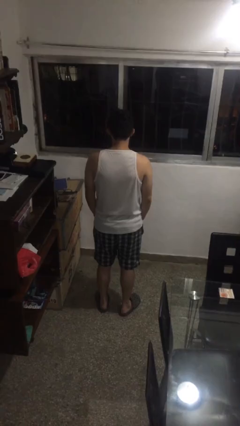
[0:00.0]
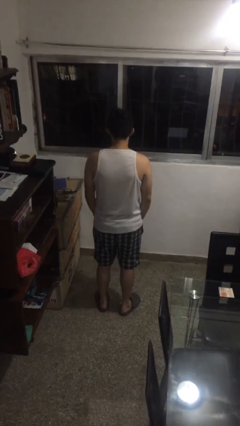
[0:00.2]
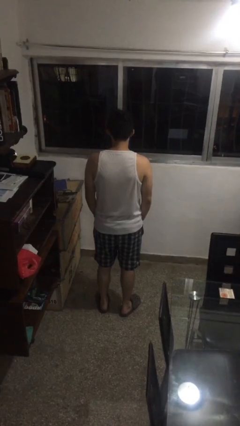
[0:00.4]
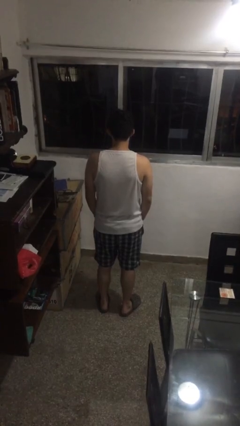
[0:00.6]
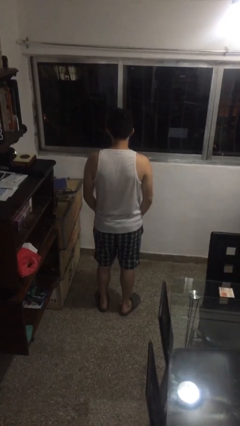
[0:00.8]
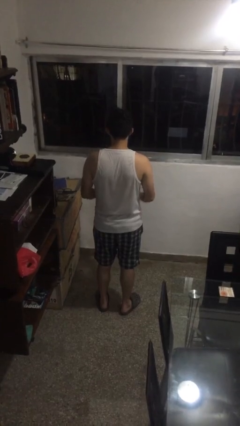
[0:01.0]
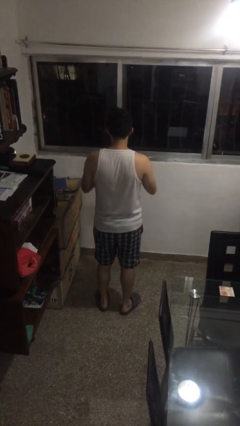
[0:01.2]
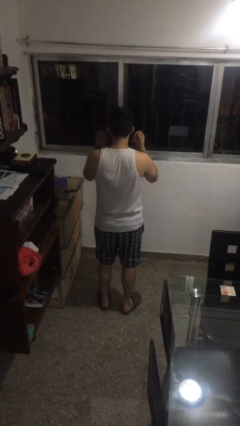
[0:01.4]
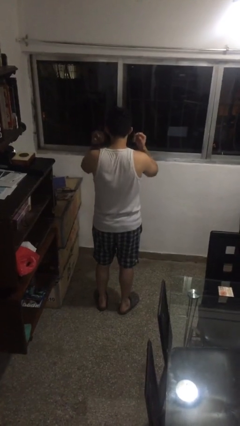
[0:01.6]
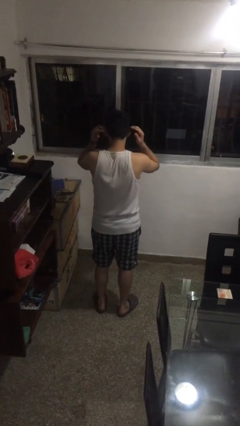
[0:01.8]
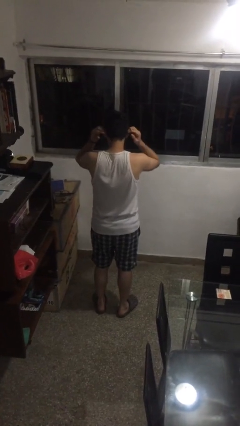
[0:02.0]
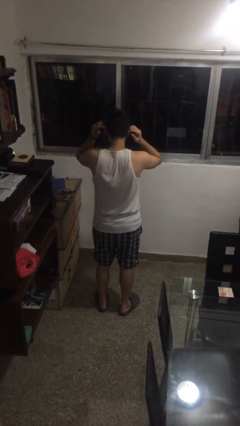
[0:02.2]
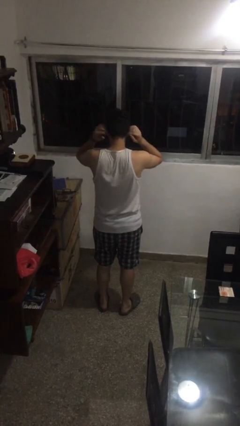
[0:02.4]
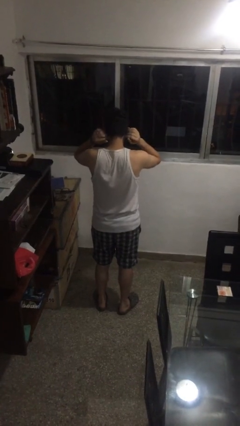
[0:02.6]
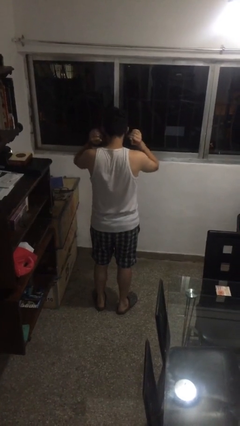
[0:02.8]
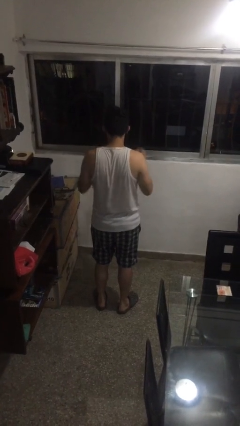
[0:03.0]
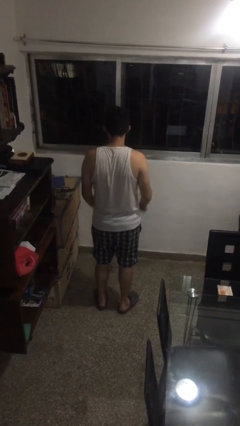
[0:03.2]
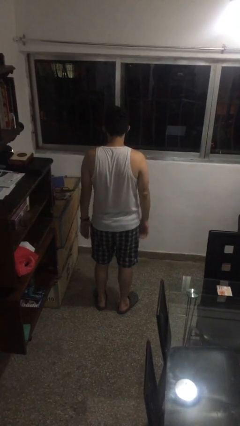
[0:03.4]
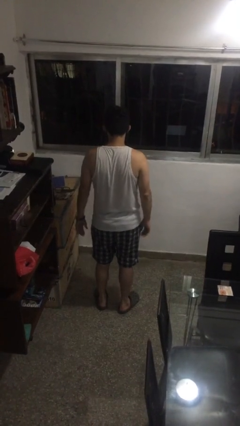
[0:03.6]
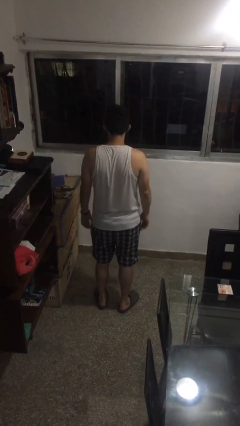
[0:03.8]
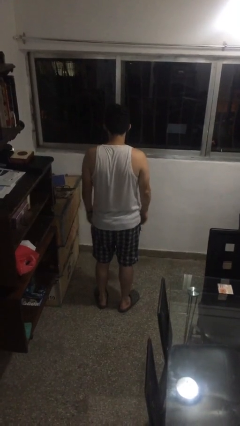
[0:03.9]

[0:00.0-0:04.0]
person puts on facemask

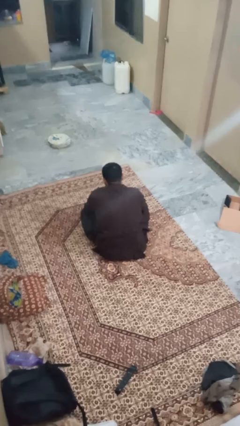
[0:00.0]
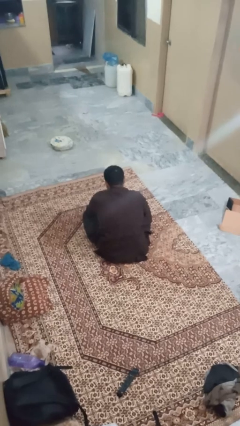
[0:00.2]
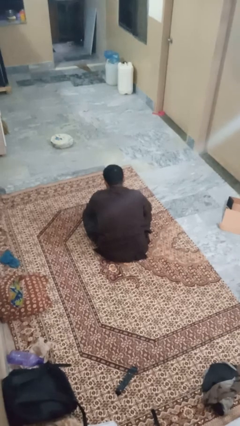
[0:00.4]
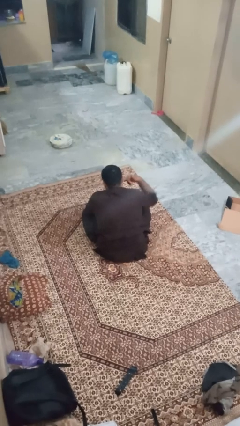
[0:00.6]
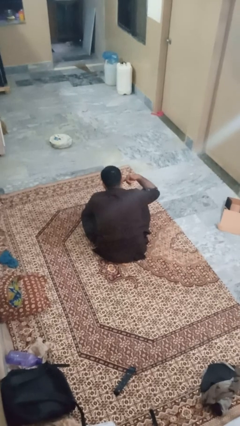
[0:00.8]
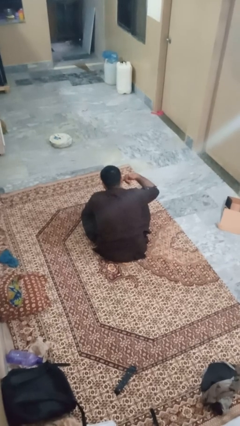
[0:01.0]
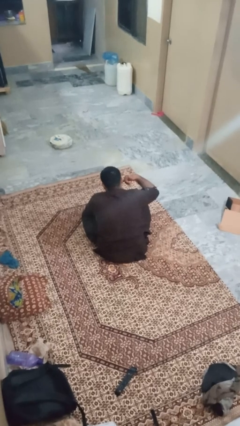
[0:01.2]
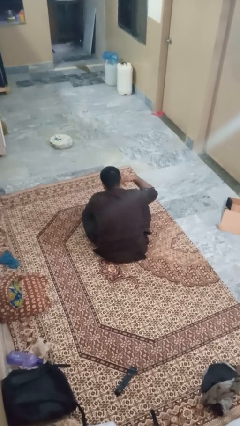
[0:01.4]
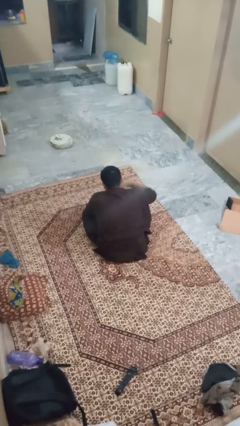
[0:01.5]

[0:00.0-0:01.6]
person gestures call me

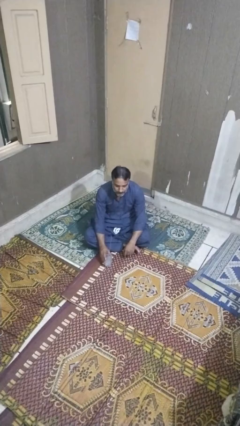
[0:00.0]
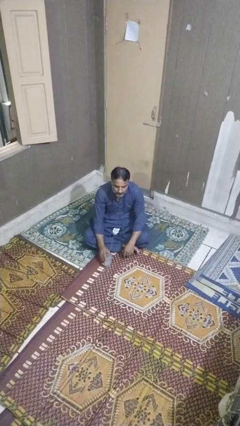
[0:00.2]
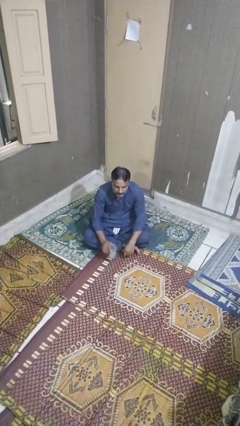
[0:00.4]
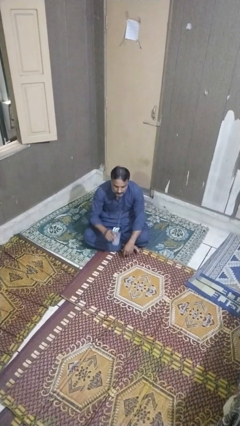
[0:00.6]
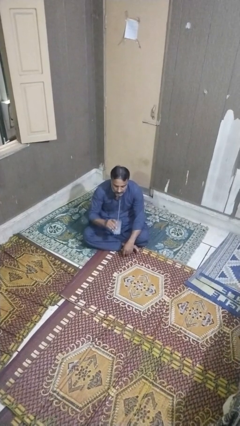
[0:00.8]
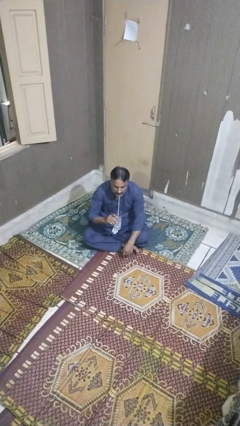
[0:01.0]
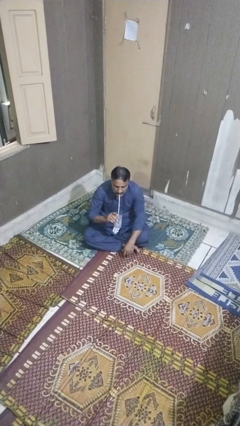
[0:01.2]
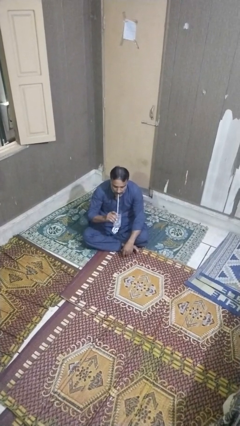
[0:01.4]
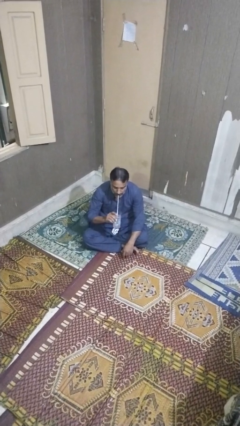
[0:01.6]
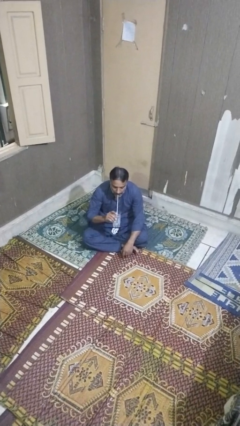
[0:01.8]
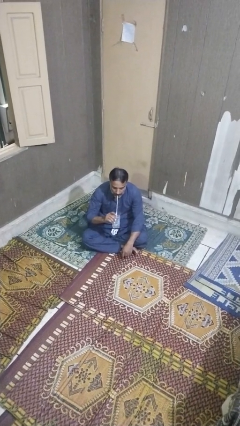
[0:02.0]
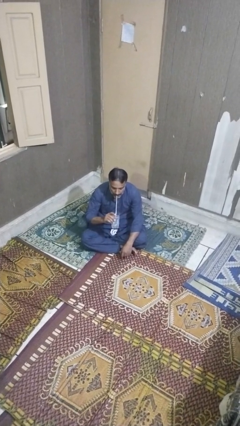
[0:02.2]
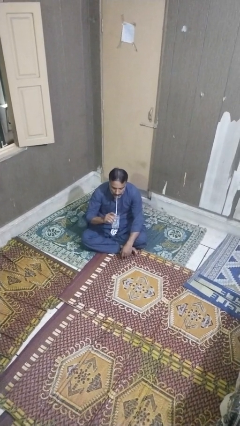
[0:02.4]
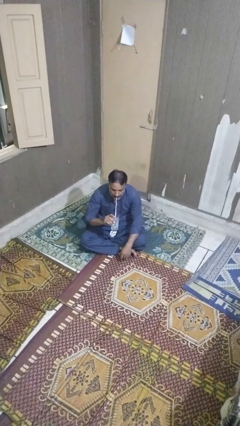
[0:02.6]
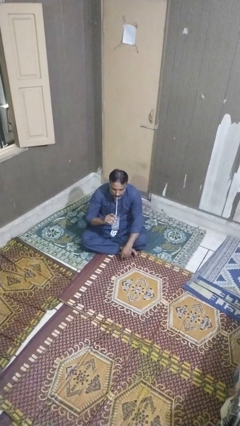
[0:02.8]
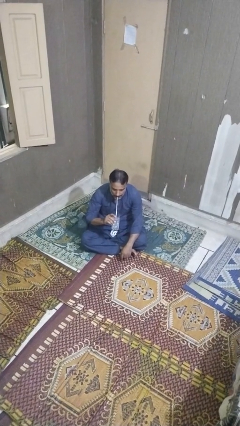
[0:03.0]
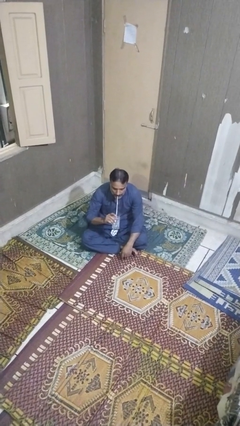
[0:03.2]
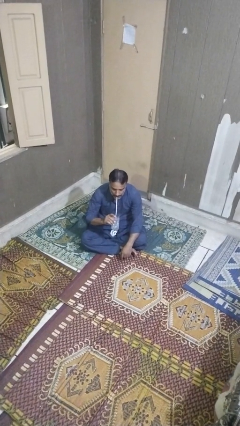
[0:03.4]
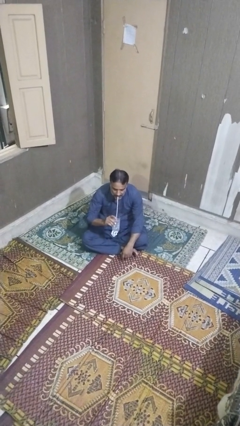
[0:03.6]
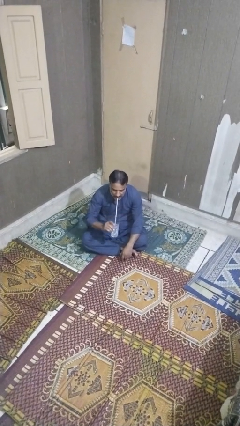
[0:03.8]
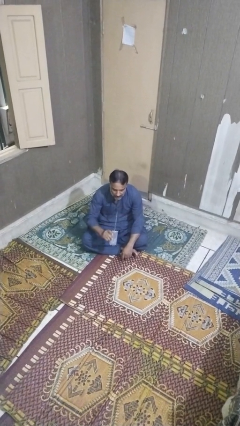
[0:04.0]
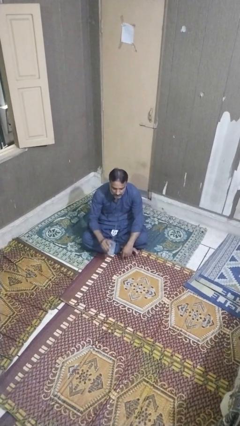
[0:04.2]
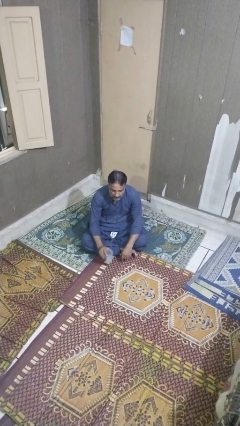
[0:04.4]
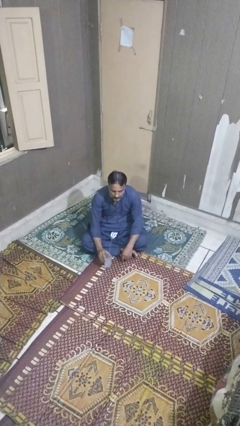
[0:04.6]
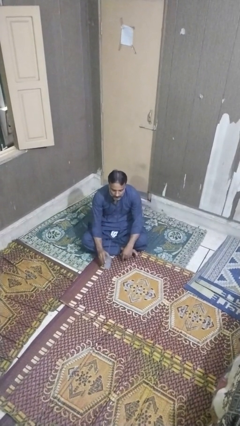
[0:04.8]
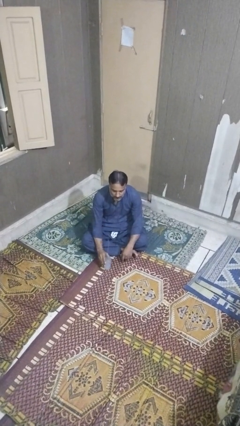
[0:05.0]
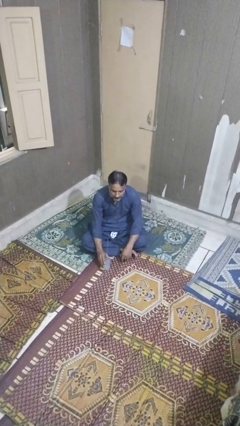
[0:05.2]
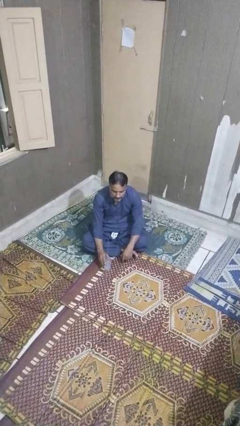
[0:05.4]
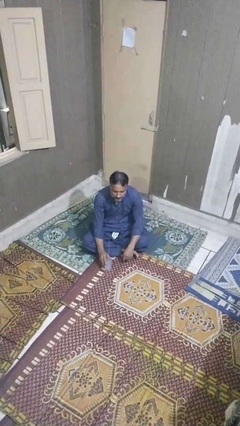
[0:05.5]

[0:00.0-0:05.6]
person drinks from straw

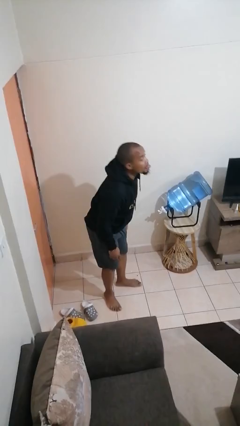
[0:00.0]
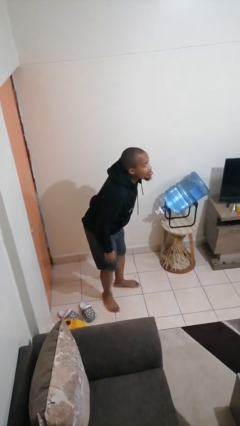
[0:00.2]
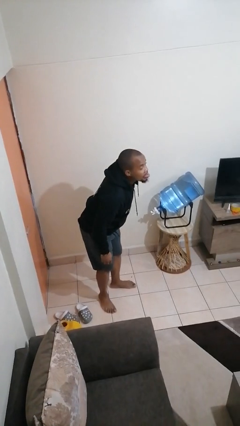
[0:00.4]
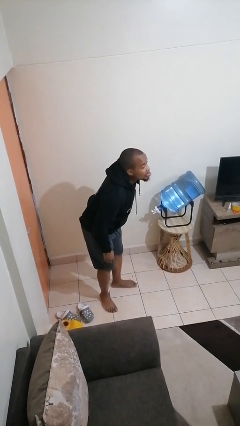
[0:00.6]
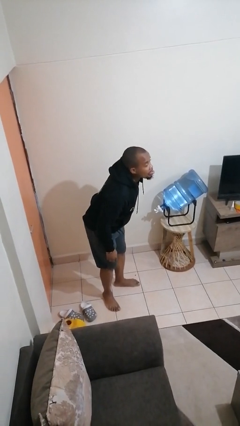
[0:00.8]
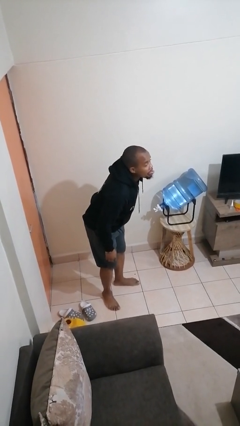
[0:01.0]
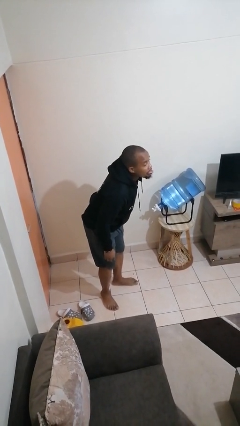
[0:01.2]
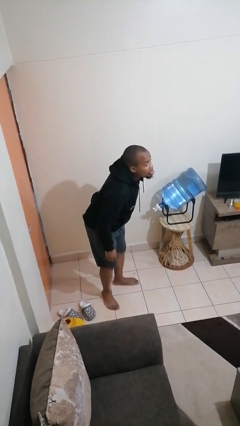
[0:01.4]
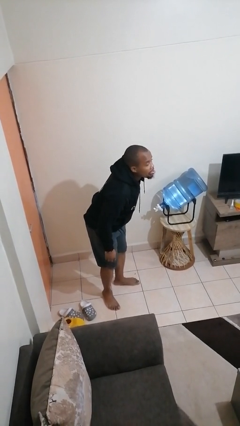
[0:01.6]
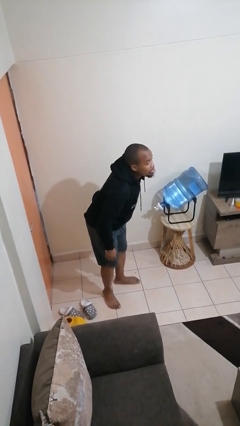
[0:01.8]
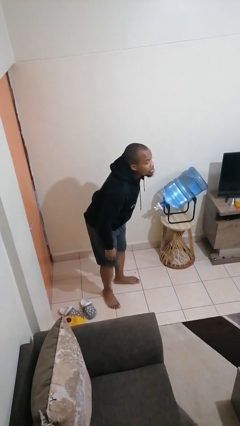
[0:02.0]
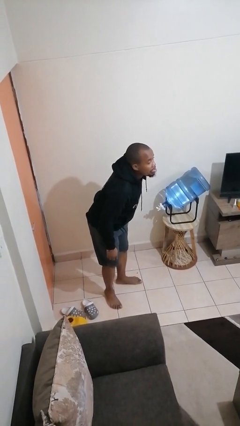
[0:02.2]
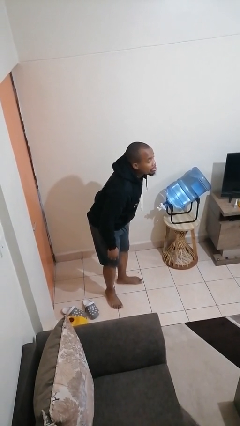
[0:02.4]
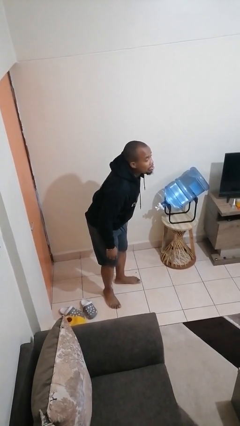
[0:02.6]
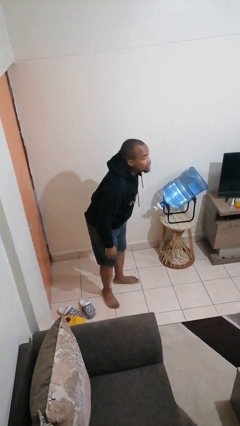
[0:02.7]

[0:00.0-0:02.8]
person sticks out tongue

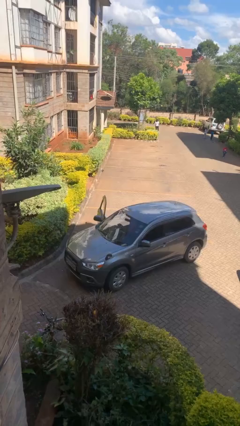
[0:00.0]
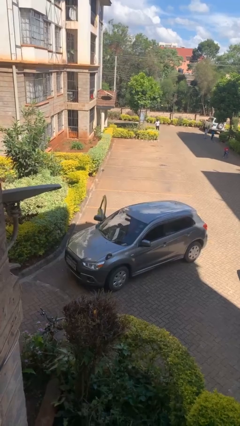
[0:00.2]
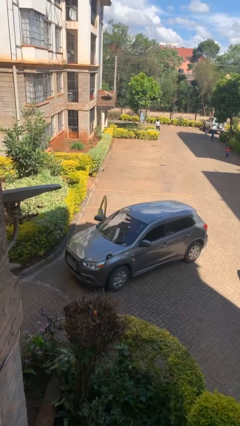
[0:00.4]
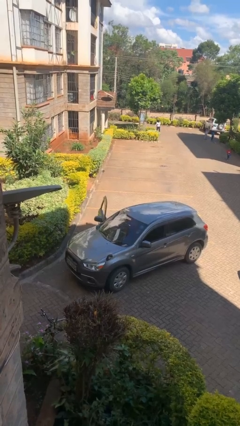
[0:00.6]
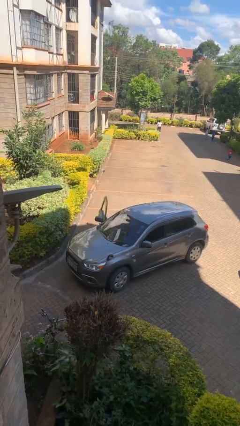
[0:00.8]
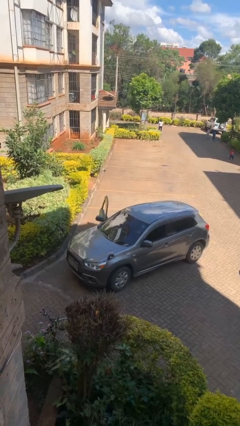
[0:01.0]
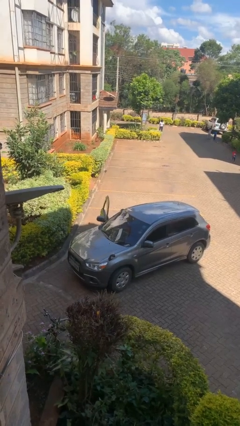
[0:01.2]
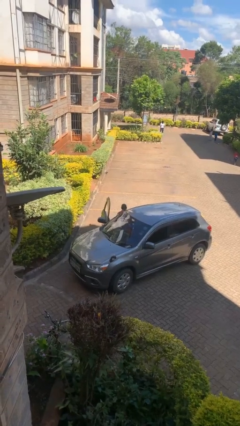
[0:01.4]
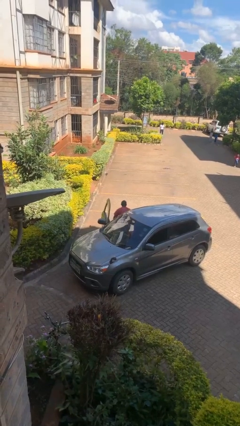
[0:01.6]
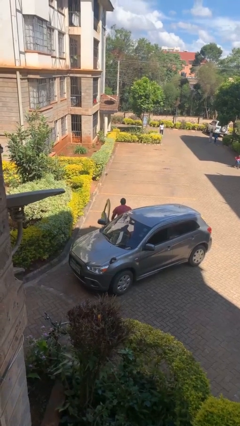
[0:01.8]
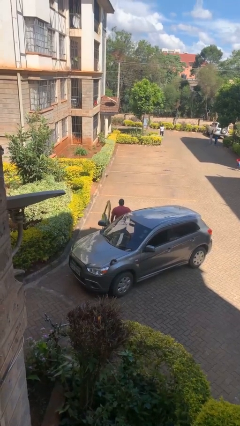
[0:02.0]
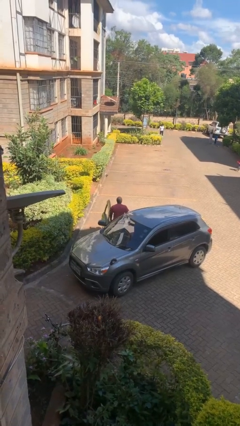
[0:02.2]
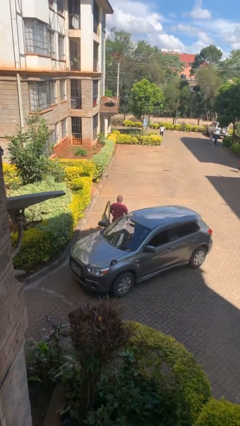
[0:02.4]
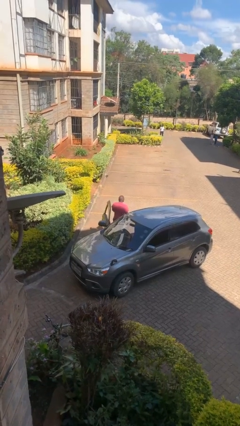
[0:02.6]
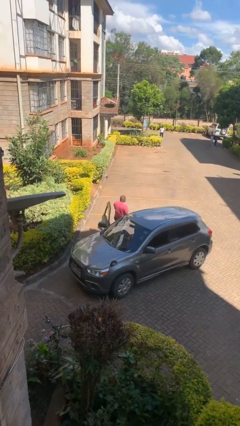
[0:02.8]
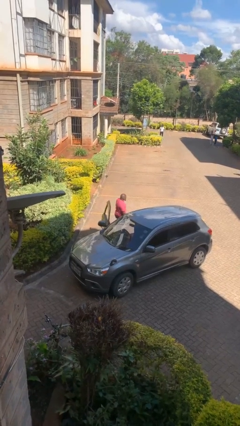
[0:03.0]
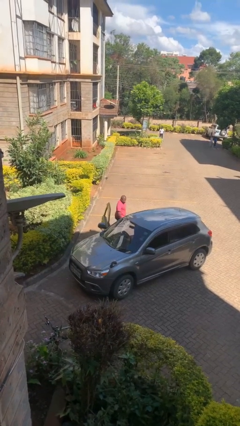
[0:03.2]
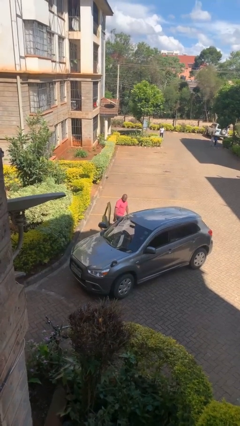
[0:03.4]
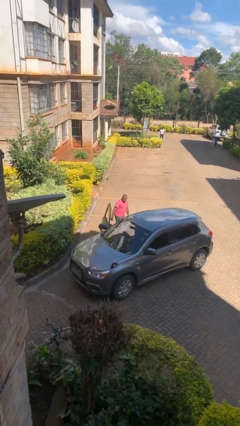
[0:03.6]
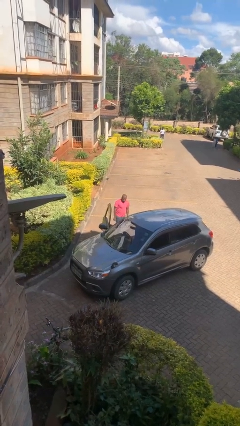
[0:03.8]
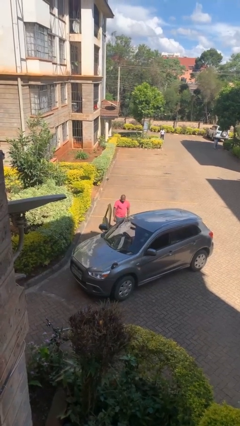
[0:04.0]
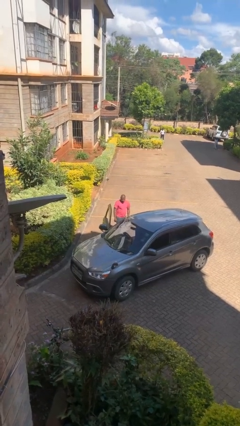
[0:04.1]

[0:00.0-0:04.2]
person exits car
